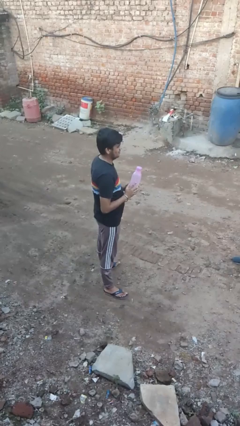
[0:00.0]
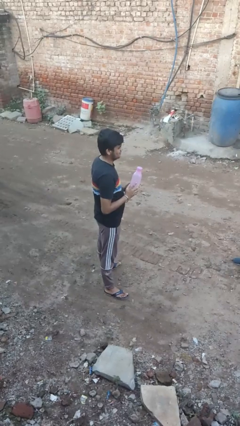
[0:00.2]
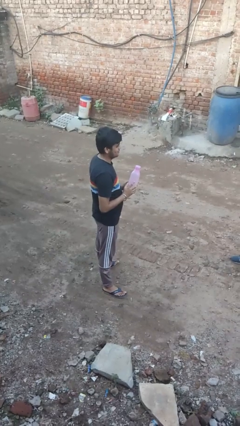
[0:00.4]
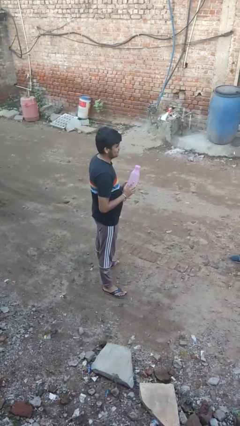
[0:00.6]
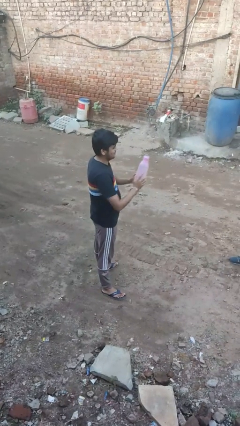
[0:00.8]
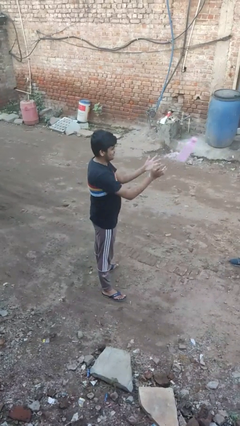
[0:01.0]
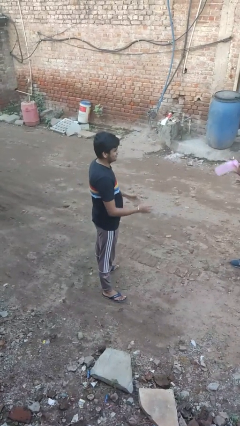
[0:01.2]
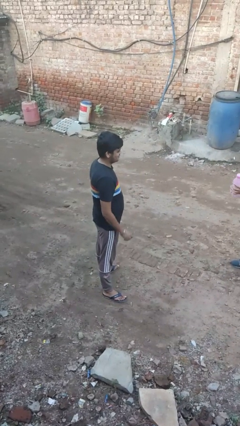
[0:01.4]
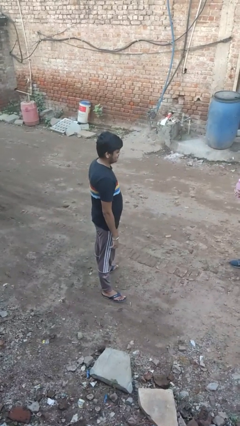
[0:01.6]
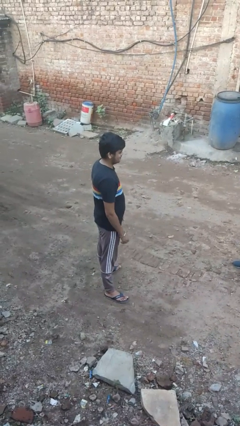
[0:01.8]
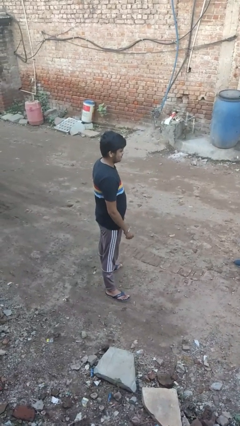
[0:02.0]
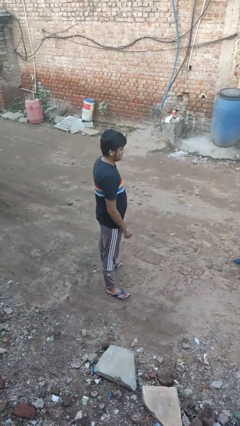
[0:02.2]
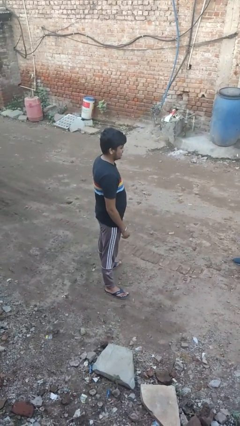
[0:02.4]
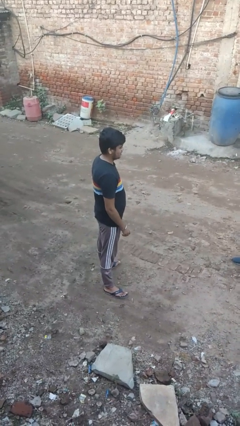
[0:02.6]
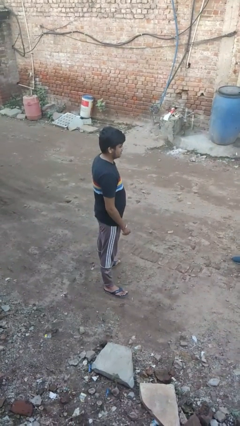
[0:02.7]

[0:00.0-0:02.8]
person throws object to person

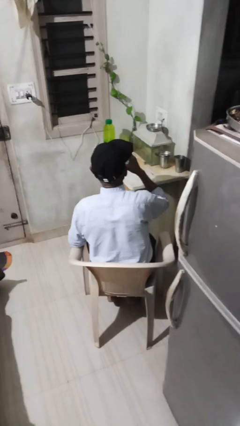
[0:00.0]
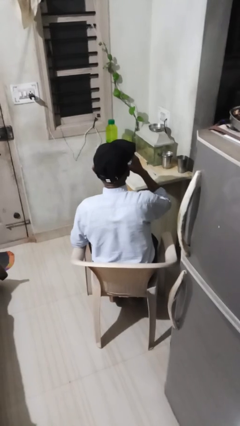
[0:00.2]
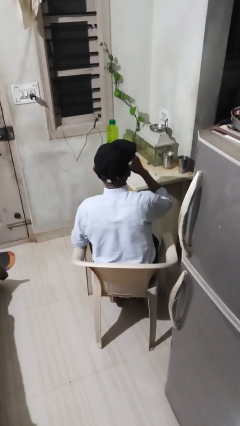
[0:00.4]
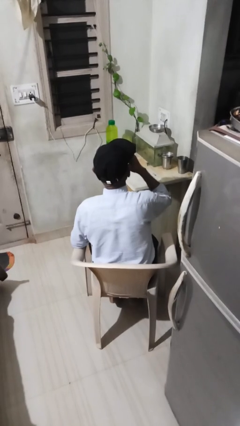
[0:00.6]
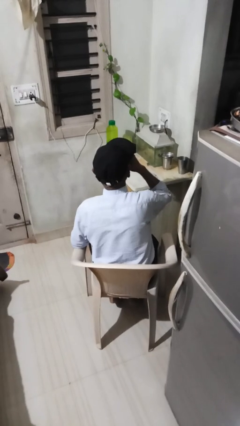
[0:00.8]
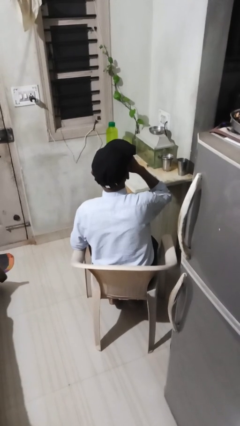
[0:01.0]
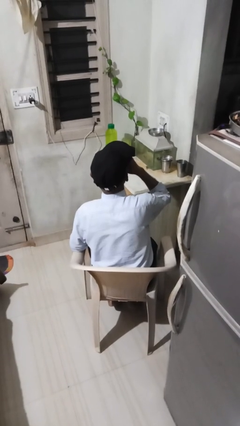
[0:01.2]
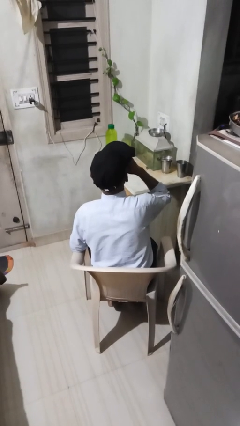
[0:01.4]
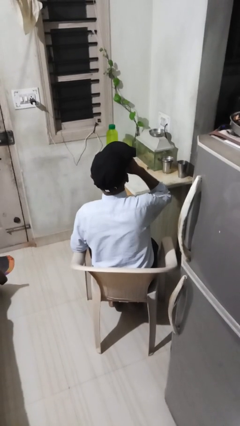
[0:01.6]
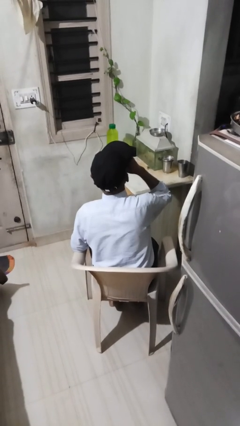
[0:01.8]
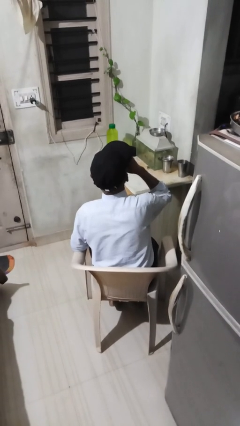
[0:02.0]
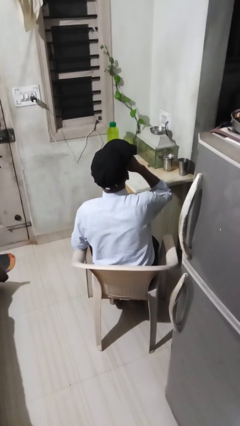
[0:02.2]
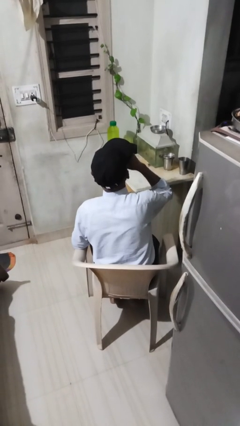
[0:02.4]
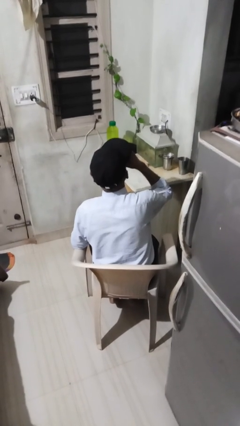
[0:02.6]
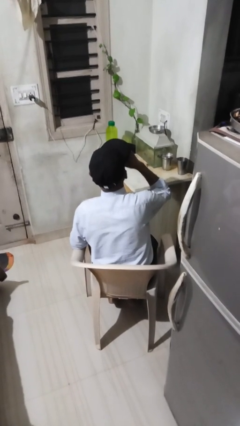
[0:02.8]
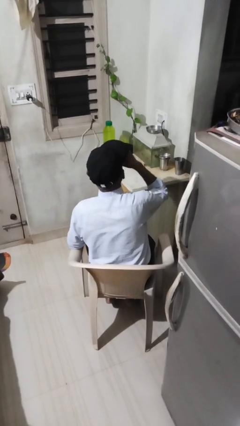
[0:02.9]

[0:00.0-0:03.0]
person drinks from shotglass

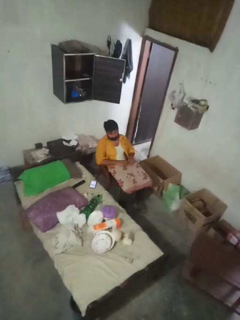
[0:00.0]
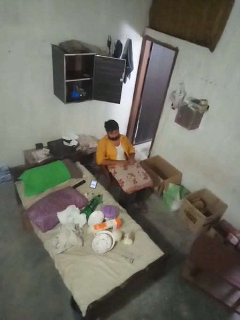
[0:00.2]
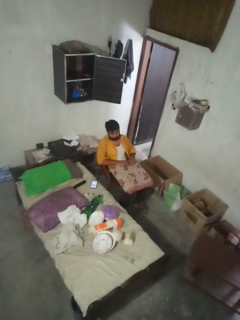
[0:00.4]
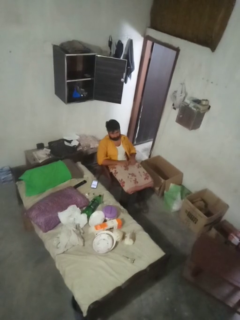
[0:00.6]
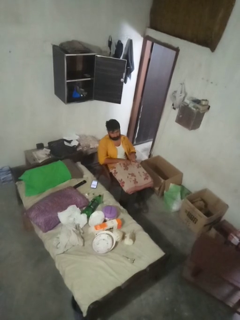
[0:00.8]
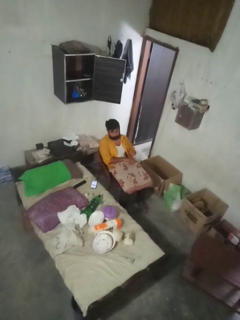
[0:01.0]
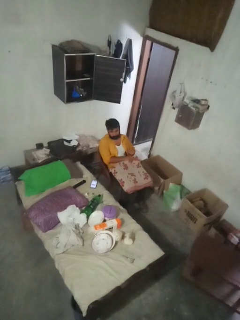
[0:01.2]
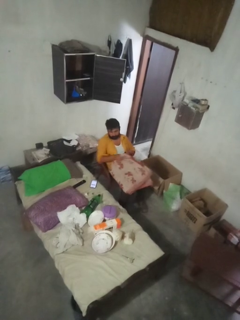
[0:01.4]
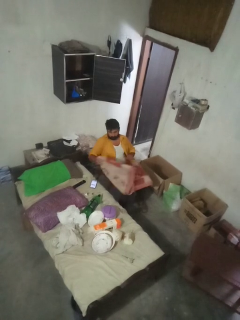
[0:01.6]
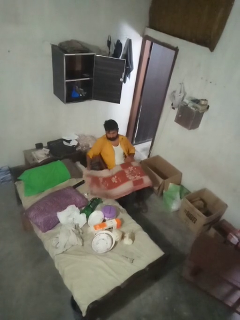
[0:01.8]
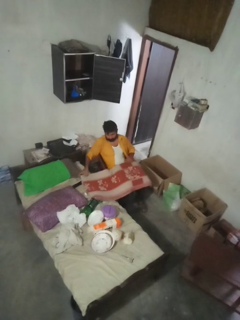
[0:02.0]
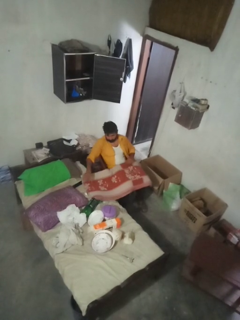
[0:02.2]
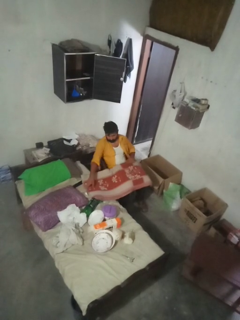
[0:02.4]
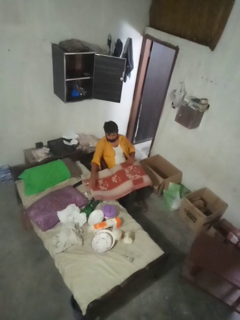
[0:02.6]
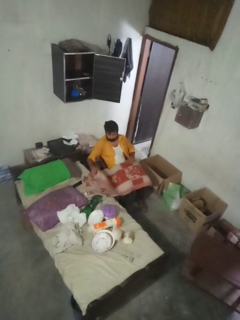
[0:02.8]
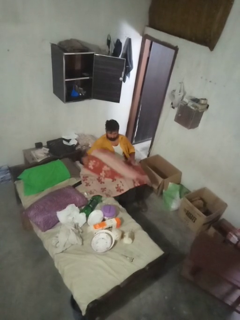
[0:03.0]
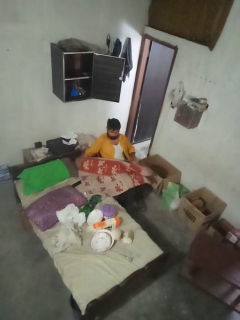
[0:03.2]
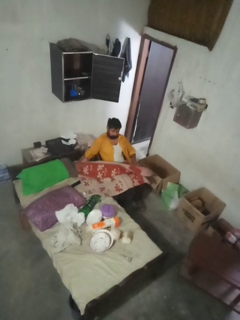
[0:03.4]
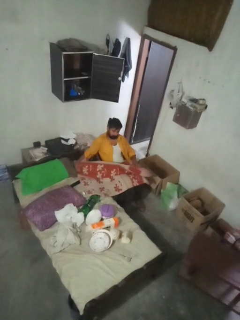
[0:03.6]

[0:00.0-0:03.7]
person unfolds blanket

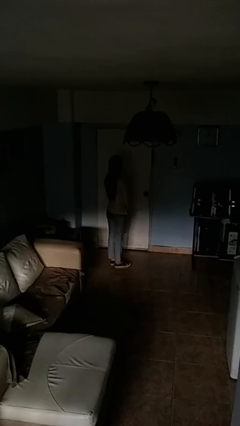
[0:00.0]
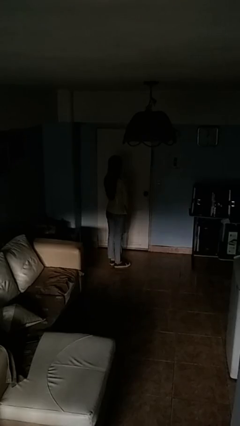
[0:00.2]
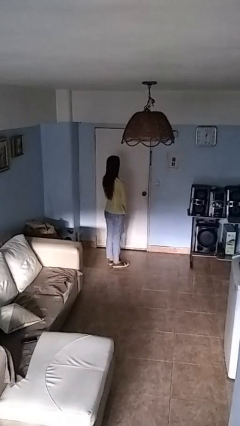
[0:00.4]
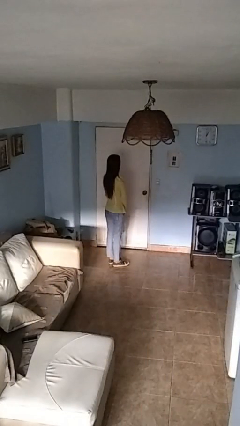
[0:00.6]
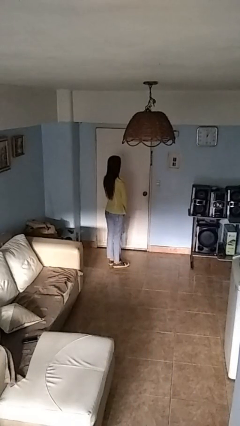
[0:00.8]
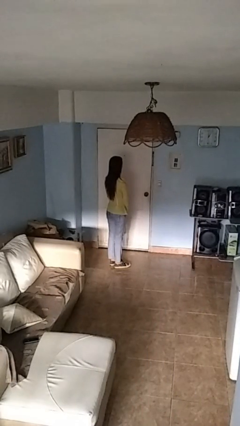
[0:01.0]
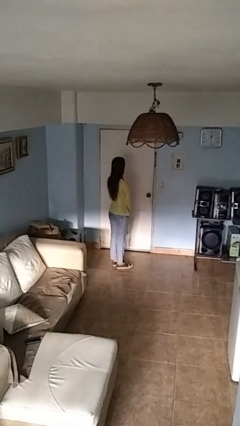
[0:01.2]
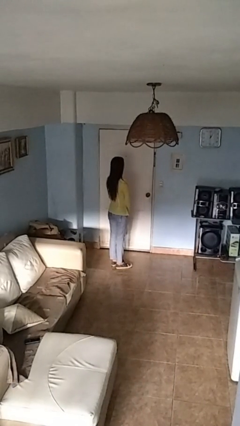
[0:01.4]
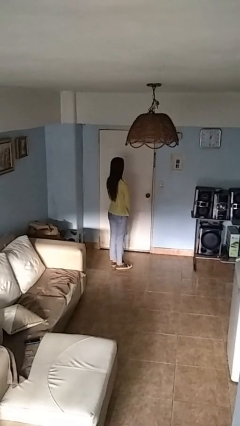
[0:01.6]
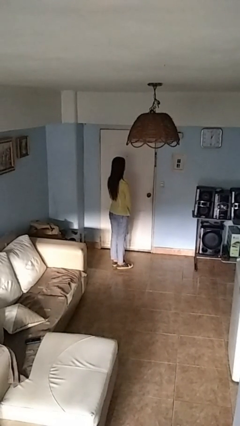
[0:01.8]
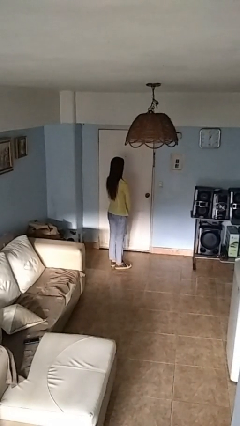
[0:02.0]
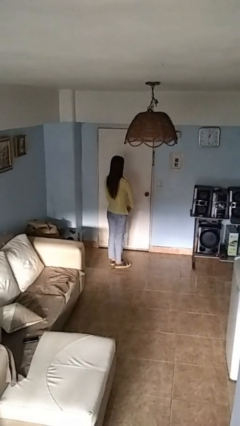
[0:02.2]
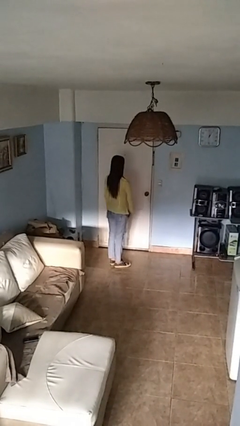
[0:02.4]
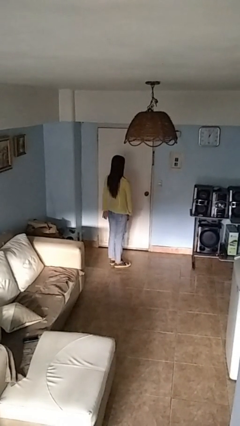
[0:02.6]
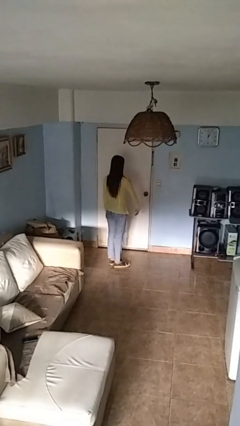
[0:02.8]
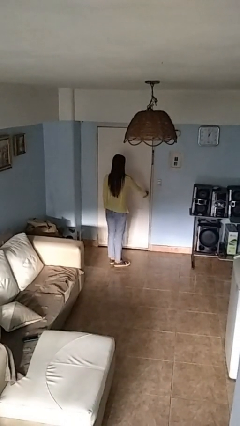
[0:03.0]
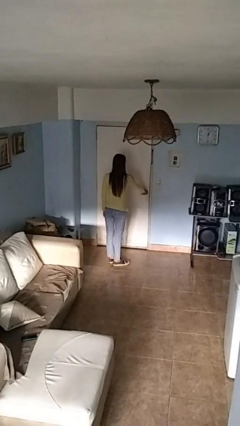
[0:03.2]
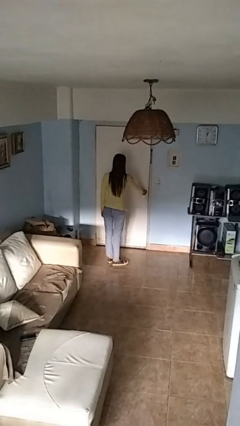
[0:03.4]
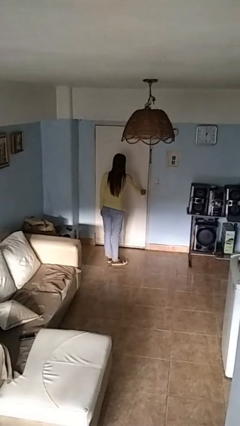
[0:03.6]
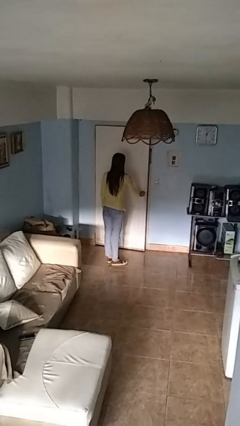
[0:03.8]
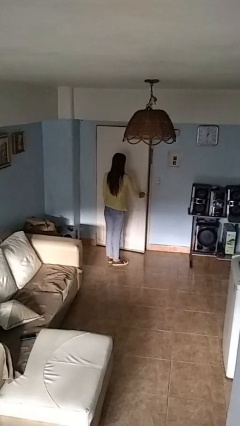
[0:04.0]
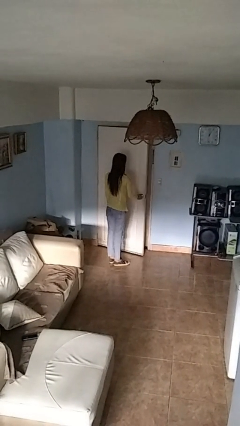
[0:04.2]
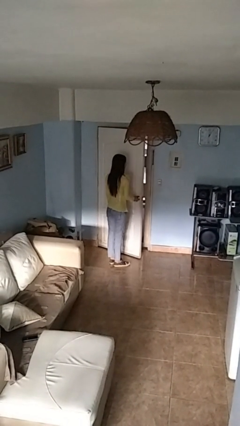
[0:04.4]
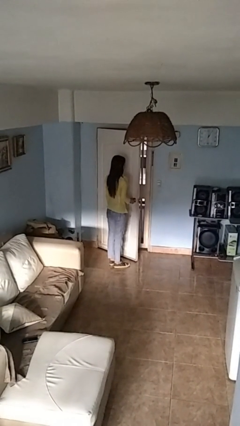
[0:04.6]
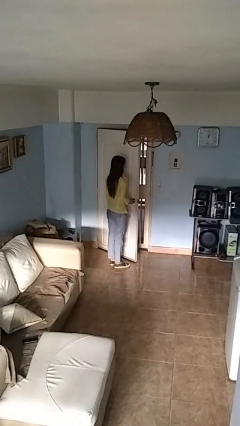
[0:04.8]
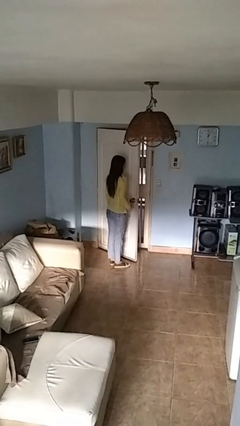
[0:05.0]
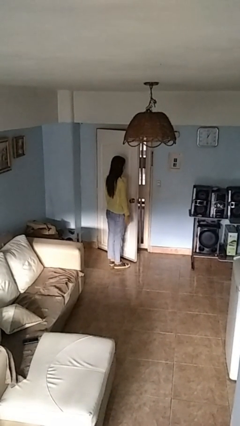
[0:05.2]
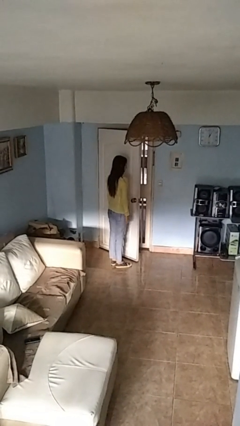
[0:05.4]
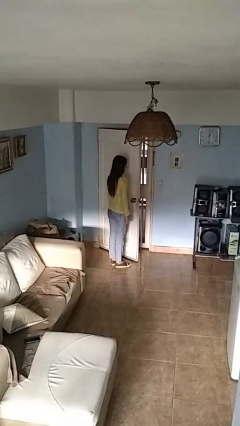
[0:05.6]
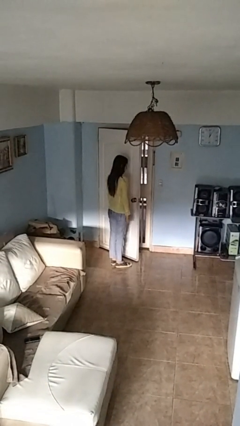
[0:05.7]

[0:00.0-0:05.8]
person opens facility door

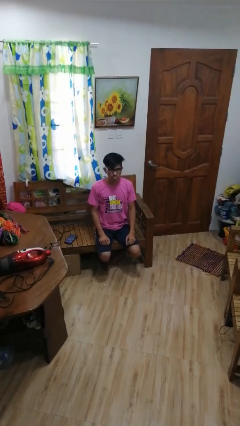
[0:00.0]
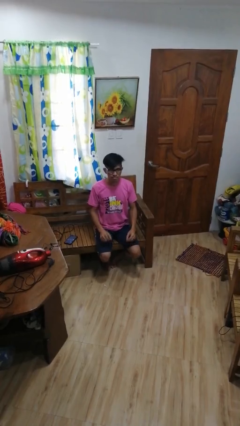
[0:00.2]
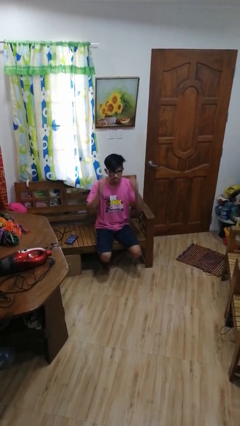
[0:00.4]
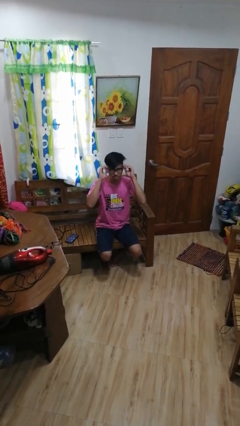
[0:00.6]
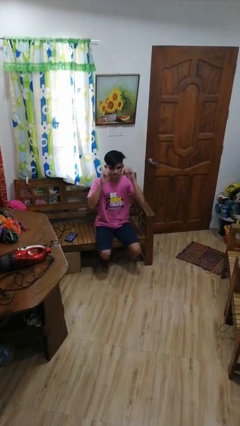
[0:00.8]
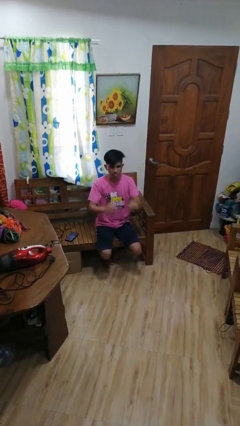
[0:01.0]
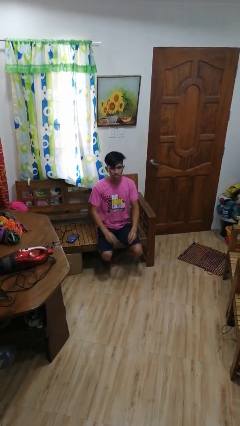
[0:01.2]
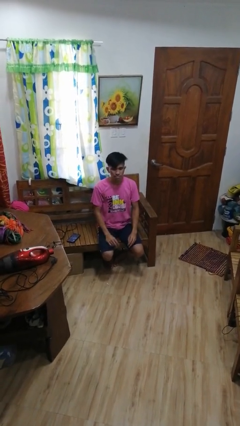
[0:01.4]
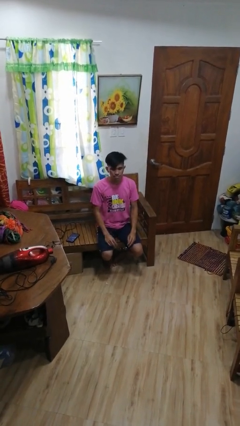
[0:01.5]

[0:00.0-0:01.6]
person takes off glasses

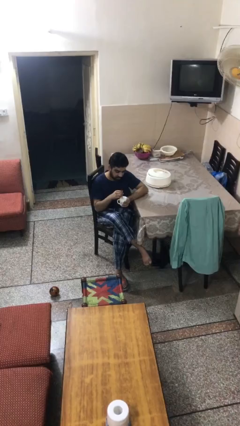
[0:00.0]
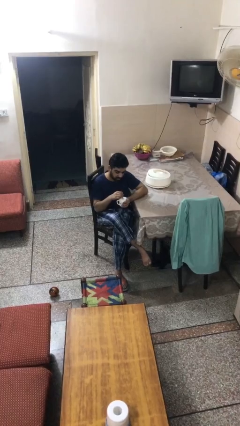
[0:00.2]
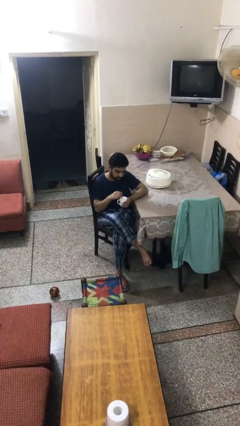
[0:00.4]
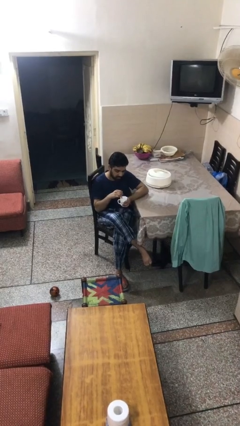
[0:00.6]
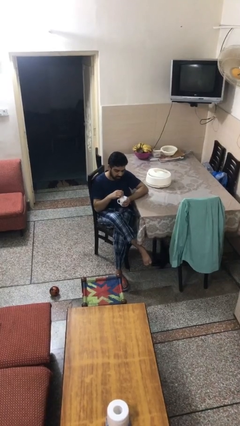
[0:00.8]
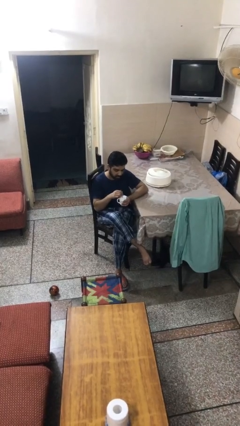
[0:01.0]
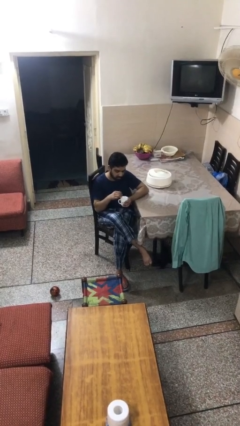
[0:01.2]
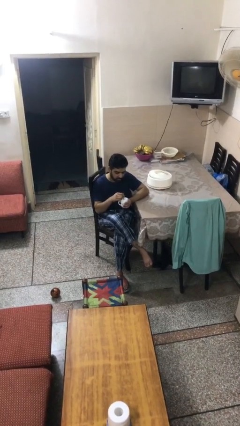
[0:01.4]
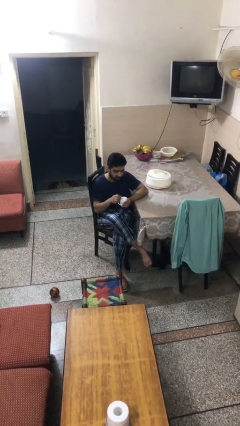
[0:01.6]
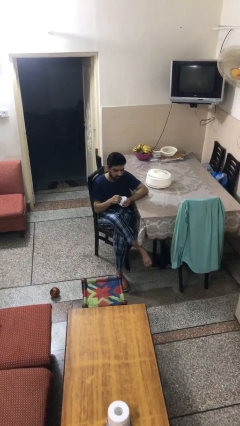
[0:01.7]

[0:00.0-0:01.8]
person stirs mug
